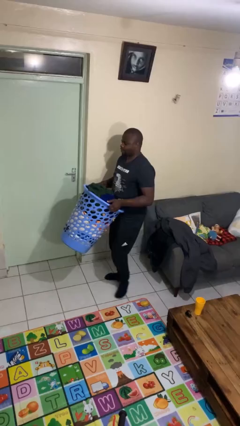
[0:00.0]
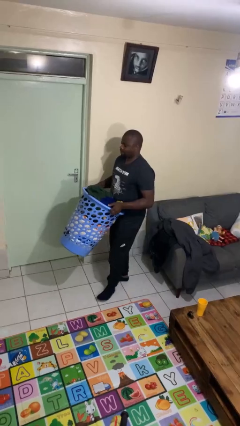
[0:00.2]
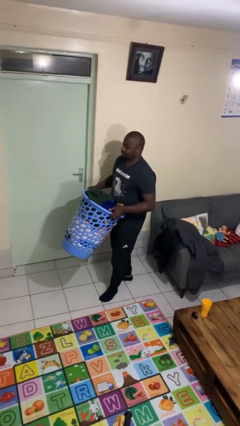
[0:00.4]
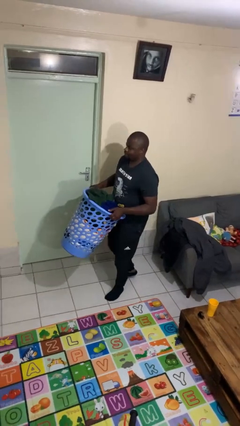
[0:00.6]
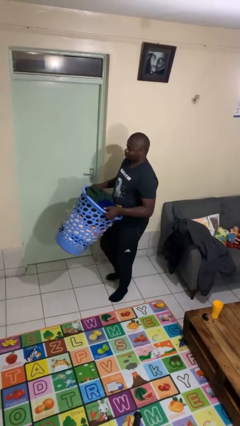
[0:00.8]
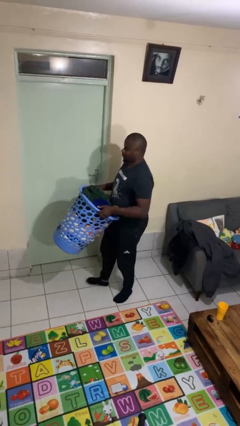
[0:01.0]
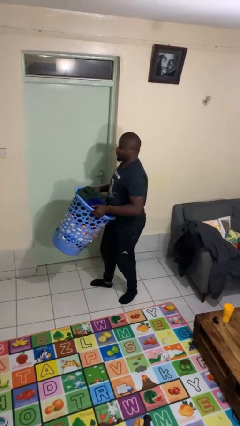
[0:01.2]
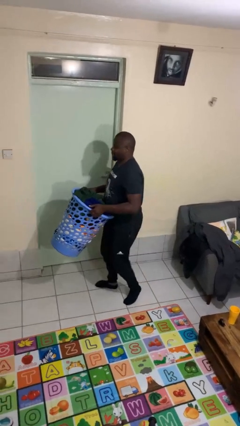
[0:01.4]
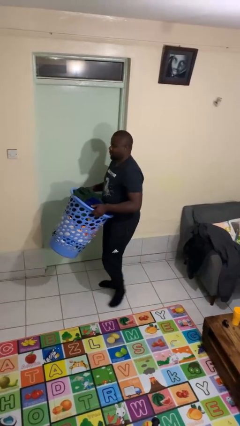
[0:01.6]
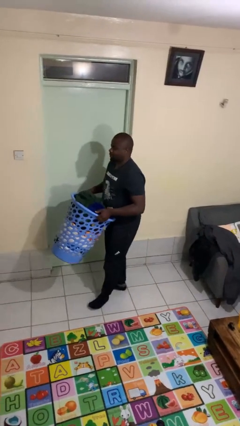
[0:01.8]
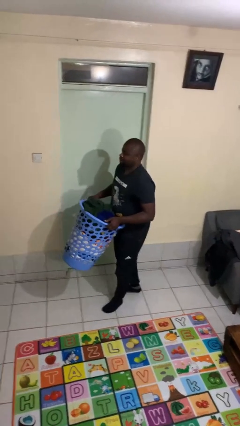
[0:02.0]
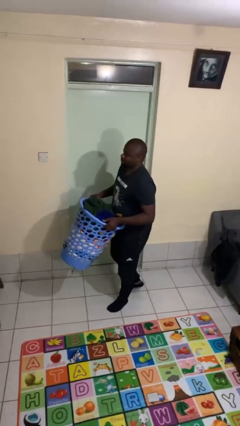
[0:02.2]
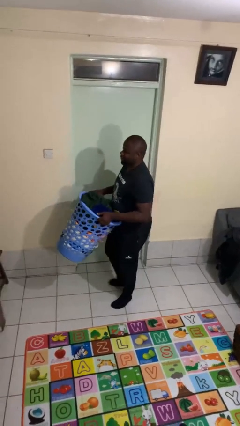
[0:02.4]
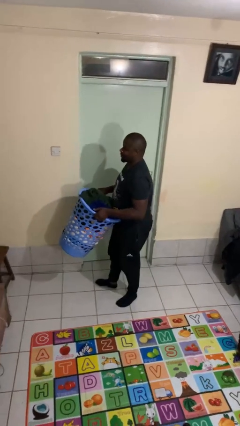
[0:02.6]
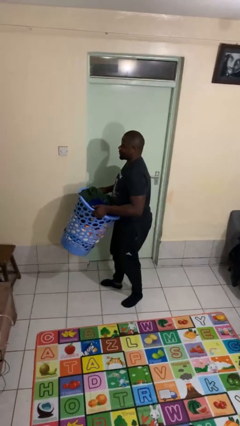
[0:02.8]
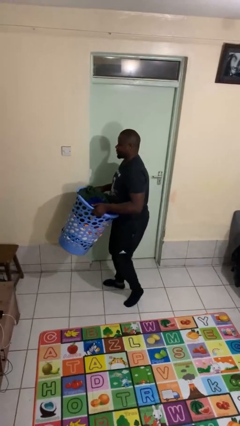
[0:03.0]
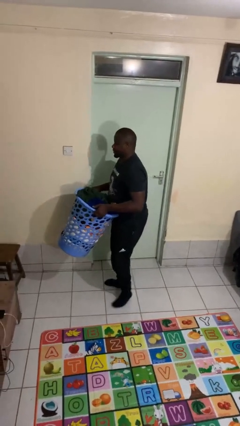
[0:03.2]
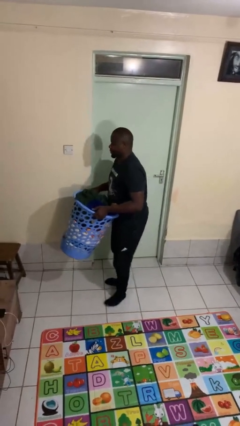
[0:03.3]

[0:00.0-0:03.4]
person carries laundry basket

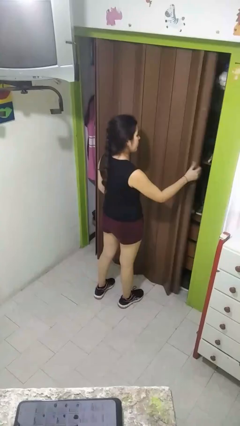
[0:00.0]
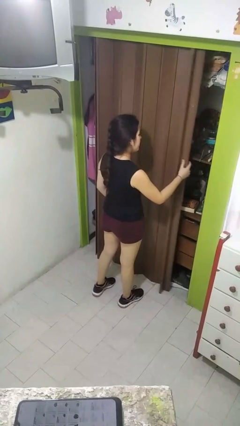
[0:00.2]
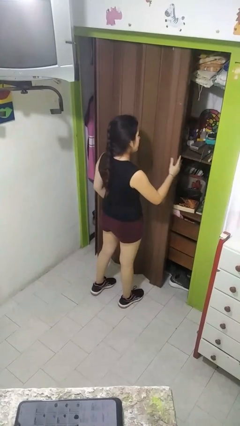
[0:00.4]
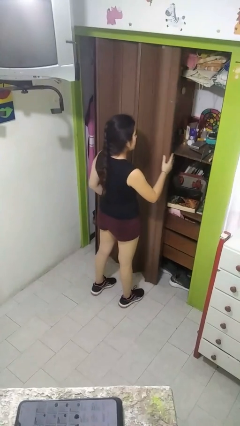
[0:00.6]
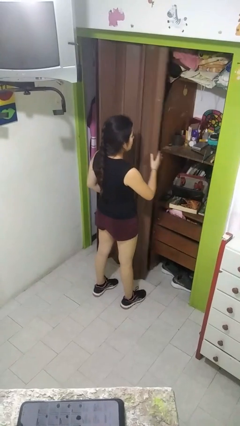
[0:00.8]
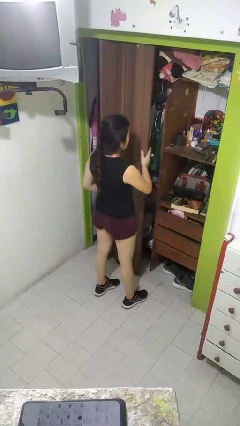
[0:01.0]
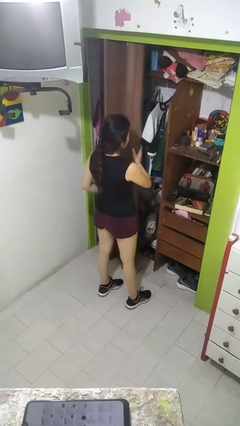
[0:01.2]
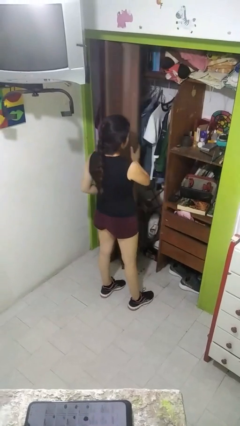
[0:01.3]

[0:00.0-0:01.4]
person opens closet door

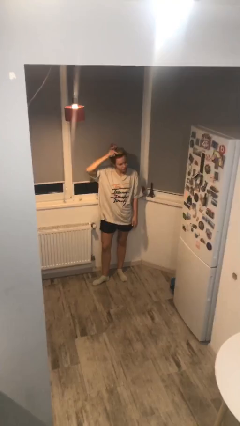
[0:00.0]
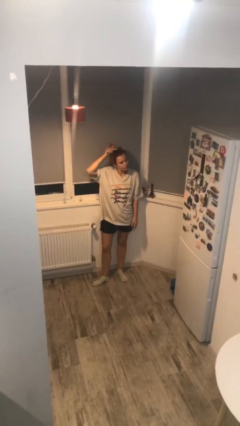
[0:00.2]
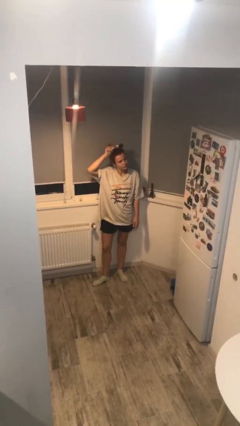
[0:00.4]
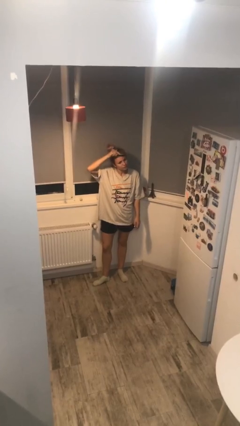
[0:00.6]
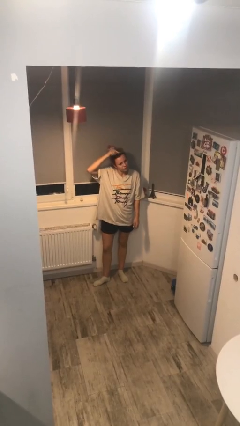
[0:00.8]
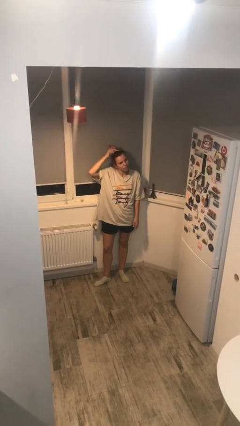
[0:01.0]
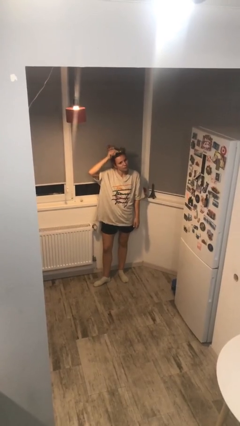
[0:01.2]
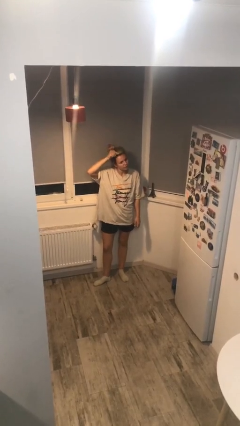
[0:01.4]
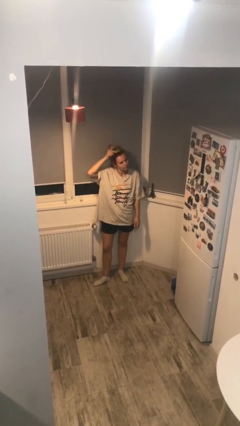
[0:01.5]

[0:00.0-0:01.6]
person brushes hair

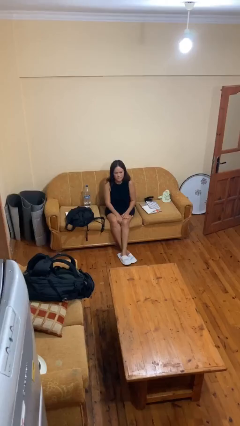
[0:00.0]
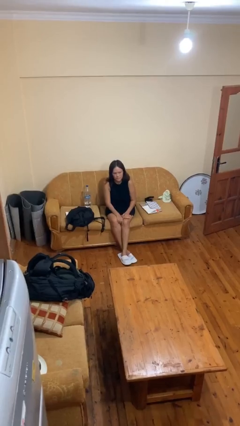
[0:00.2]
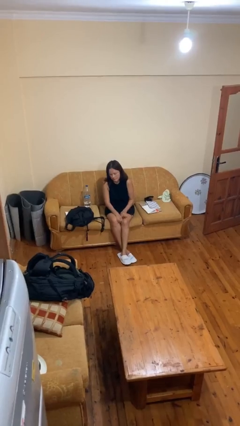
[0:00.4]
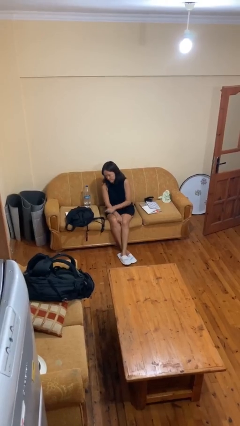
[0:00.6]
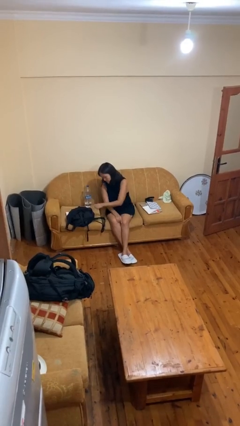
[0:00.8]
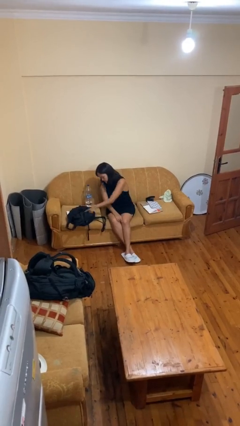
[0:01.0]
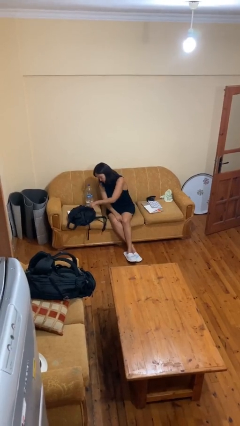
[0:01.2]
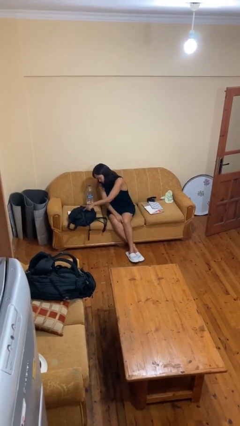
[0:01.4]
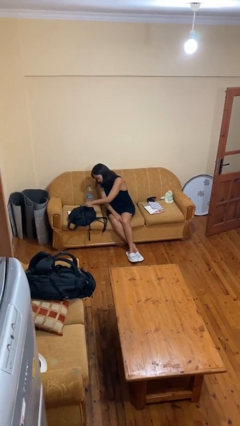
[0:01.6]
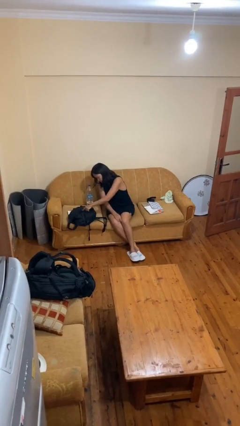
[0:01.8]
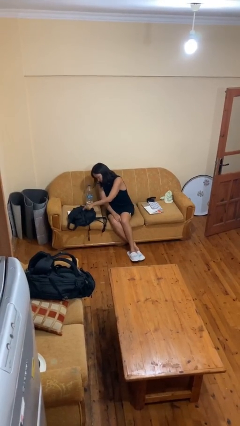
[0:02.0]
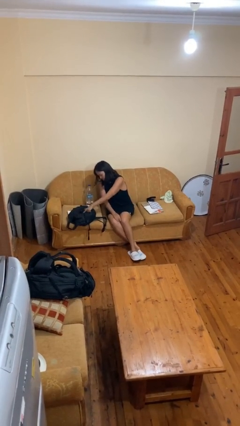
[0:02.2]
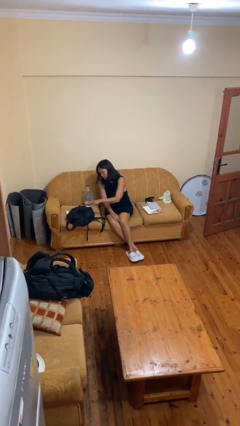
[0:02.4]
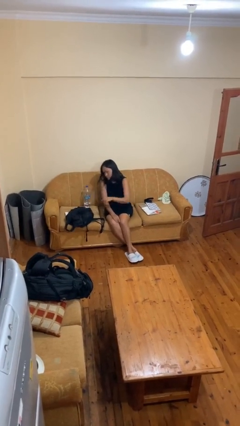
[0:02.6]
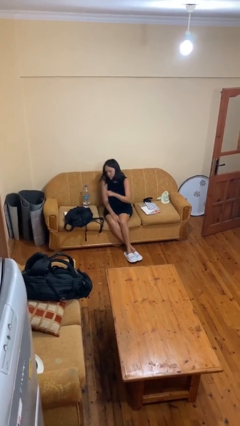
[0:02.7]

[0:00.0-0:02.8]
person taps object with finger

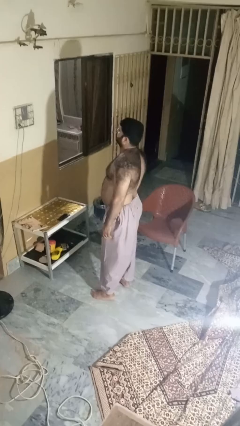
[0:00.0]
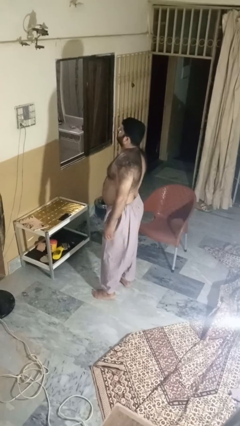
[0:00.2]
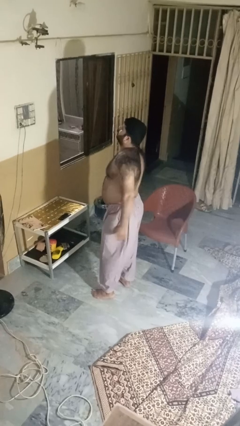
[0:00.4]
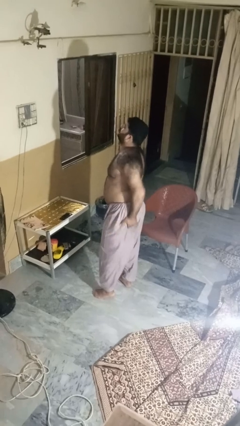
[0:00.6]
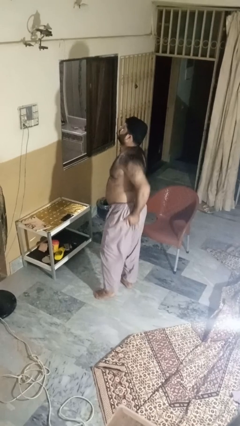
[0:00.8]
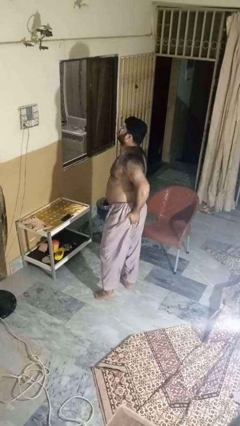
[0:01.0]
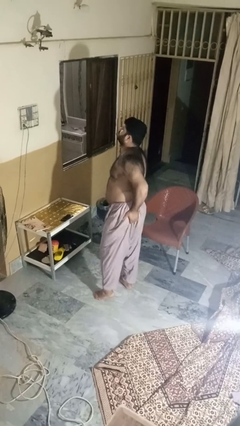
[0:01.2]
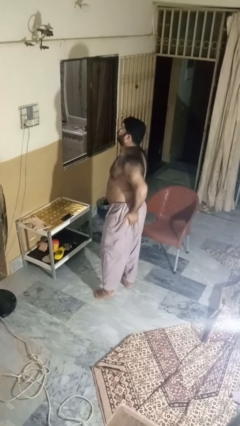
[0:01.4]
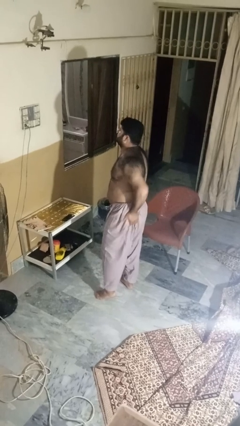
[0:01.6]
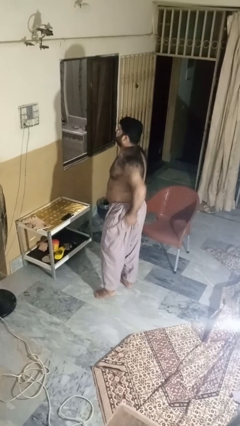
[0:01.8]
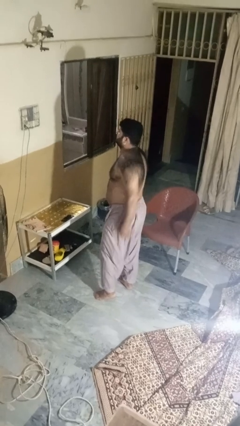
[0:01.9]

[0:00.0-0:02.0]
person wiggles hips

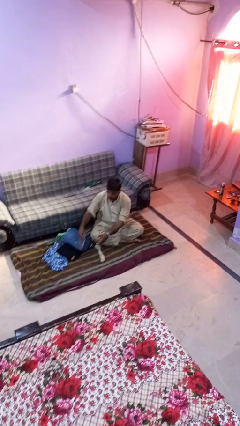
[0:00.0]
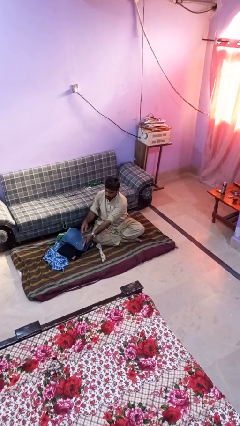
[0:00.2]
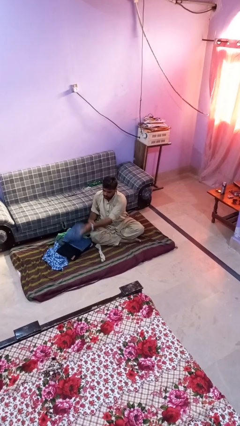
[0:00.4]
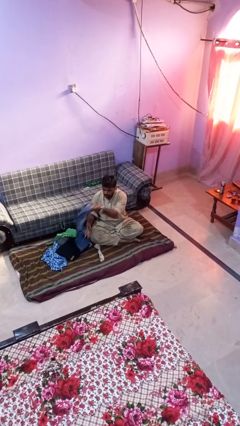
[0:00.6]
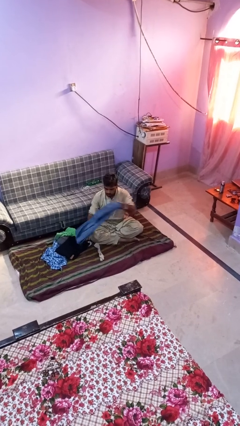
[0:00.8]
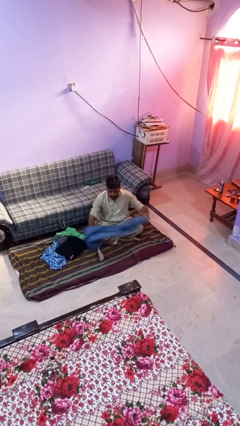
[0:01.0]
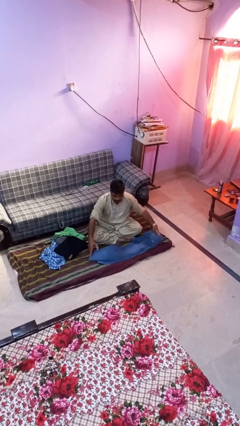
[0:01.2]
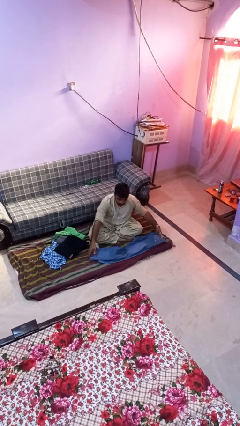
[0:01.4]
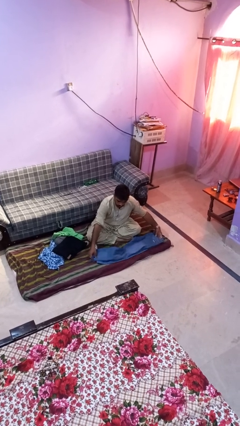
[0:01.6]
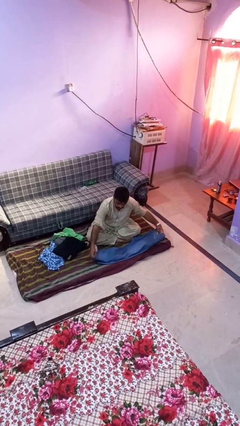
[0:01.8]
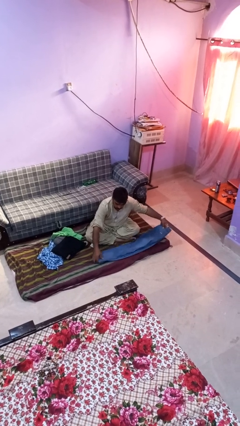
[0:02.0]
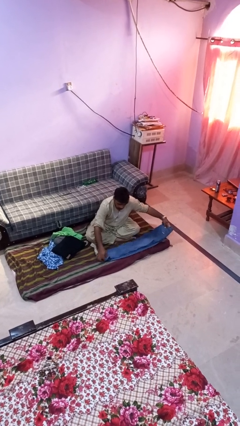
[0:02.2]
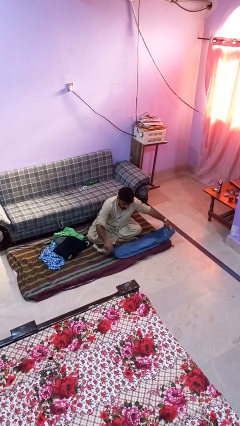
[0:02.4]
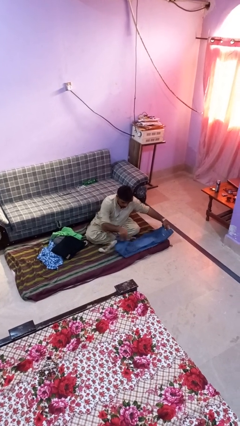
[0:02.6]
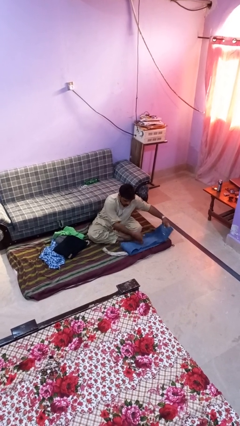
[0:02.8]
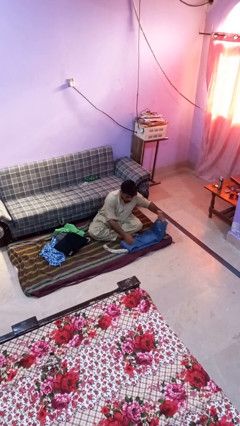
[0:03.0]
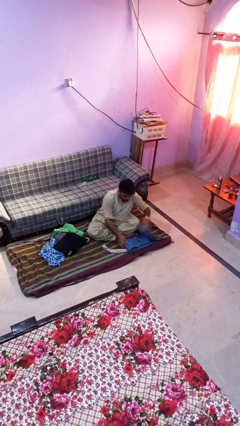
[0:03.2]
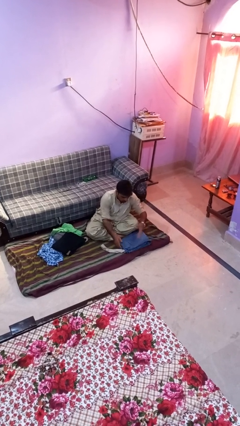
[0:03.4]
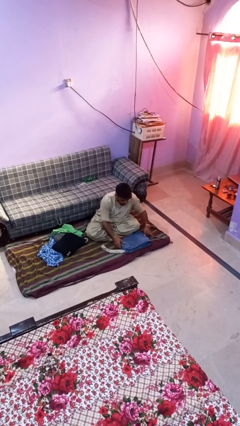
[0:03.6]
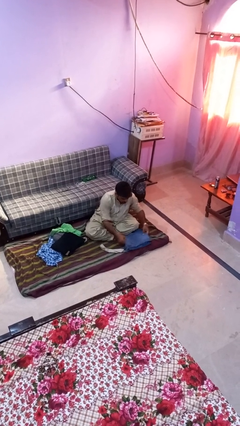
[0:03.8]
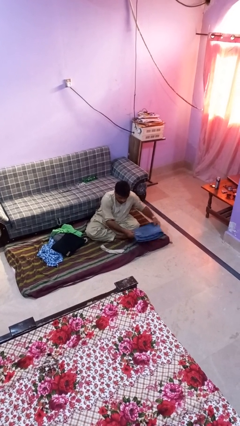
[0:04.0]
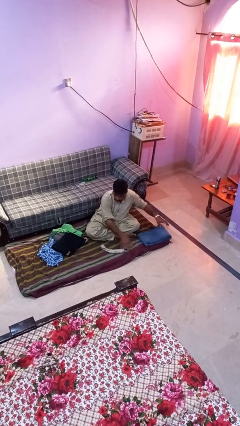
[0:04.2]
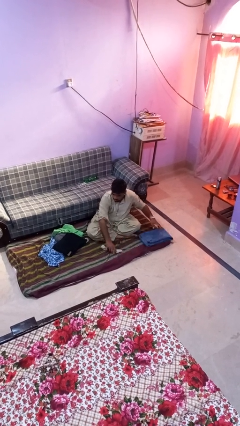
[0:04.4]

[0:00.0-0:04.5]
person folds pants

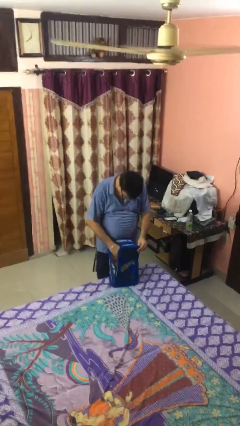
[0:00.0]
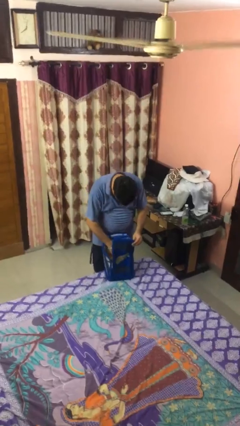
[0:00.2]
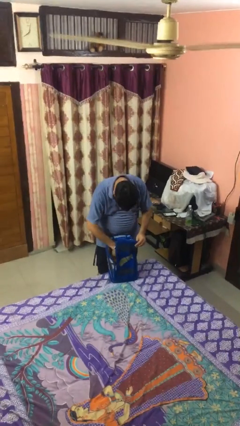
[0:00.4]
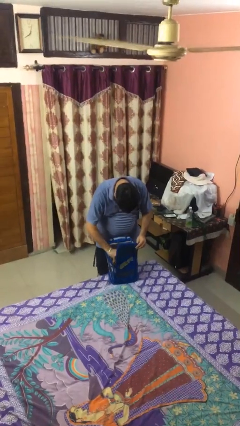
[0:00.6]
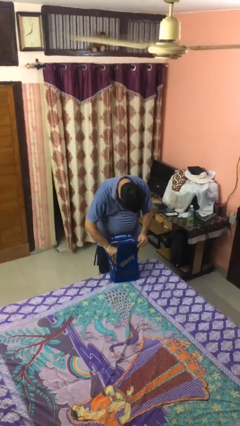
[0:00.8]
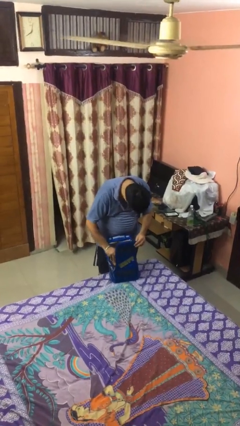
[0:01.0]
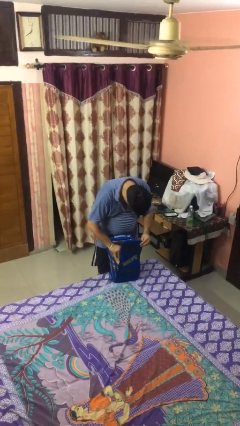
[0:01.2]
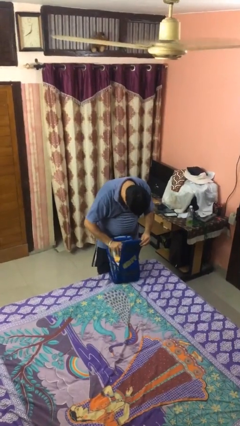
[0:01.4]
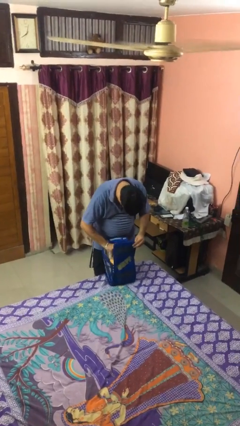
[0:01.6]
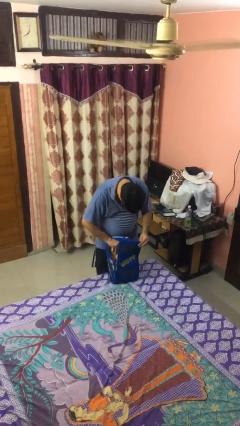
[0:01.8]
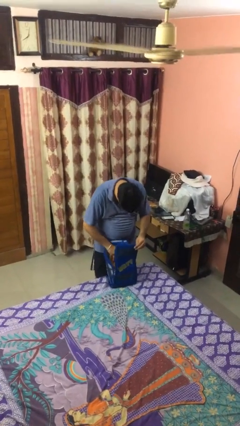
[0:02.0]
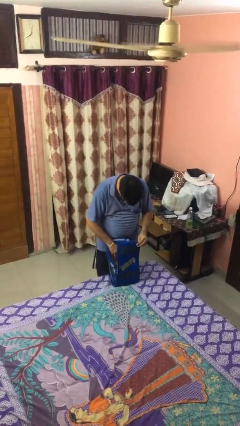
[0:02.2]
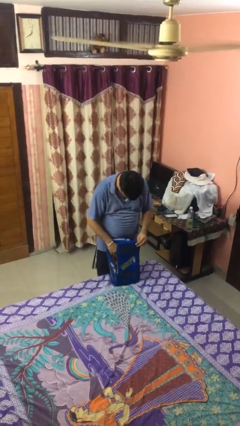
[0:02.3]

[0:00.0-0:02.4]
person searches in bag
